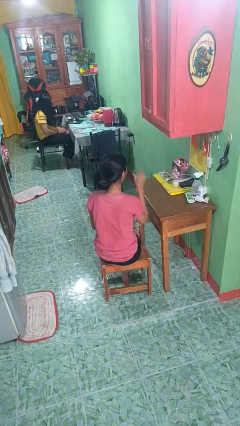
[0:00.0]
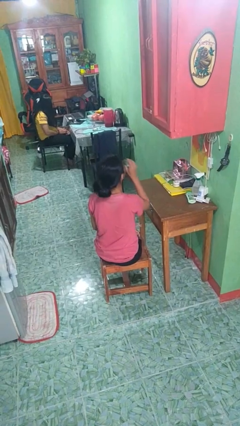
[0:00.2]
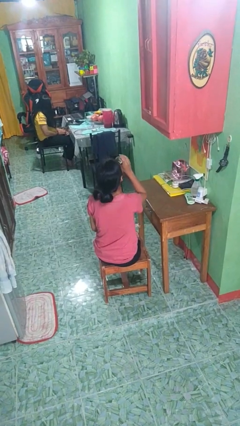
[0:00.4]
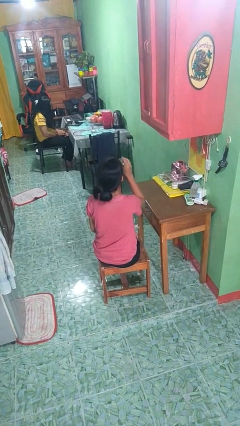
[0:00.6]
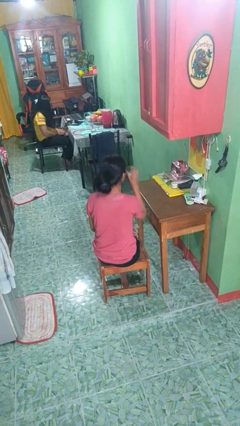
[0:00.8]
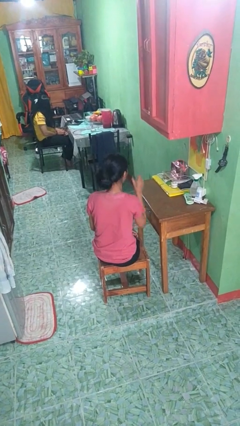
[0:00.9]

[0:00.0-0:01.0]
person drinks from shotglass

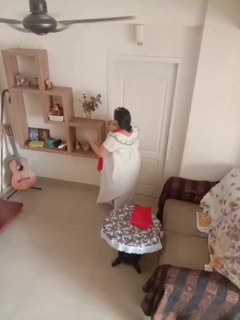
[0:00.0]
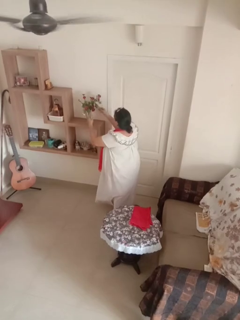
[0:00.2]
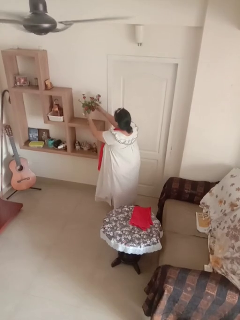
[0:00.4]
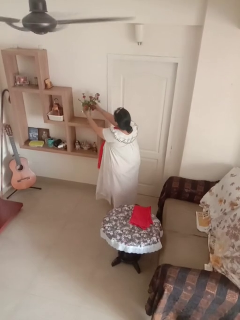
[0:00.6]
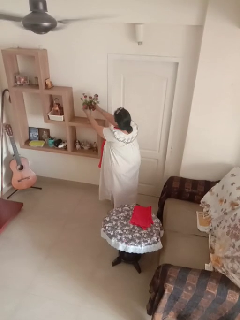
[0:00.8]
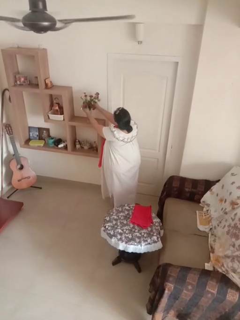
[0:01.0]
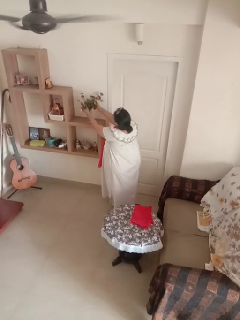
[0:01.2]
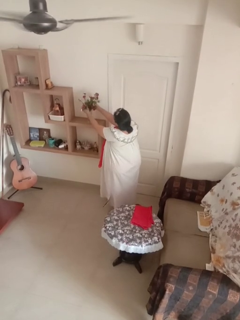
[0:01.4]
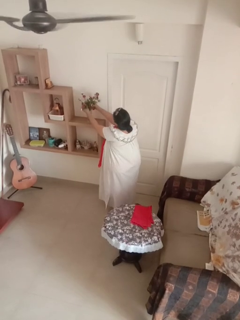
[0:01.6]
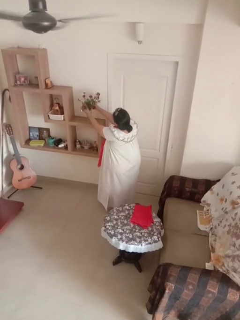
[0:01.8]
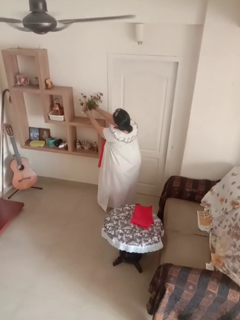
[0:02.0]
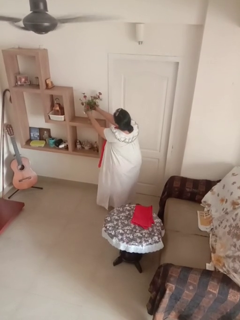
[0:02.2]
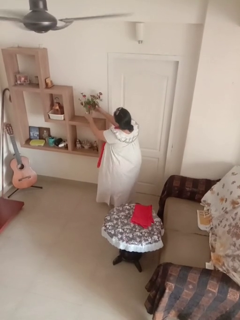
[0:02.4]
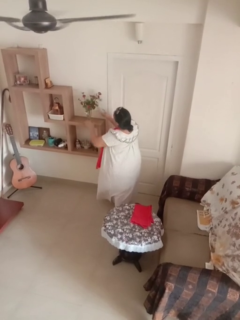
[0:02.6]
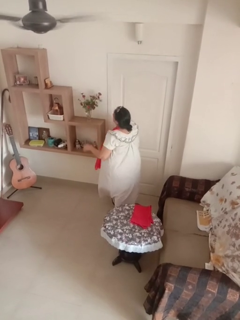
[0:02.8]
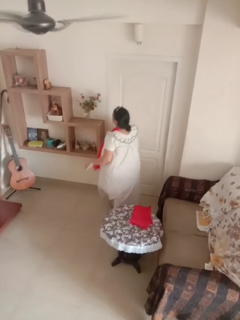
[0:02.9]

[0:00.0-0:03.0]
person arranges flowers in vase

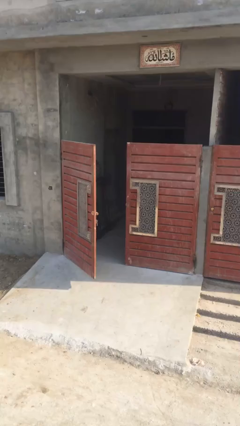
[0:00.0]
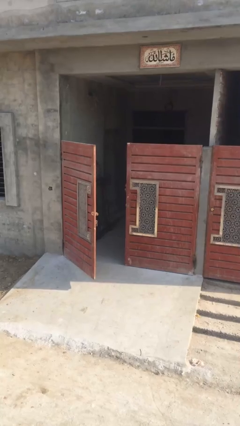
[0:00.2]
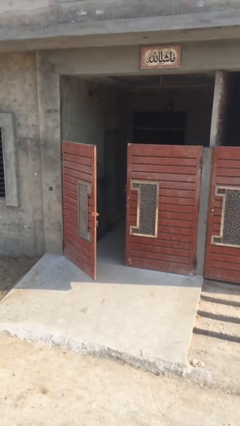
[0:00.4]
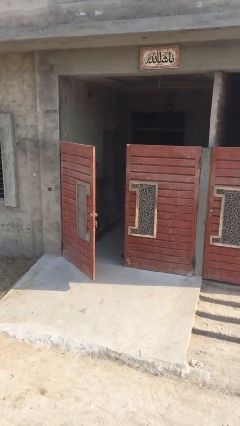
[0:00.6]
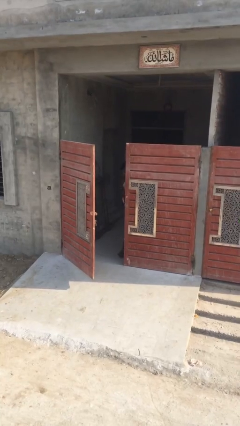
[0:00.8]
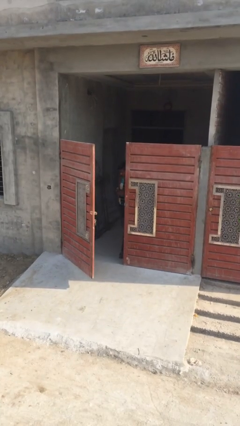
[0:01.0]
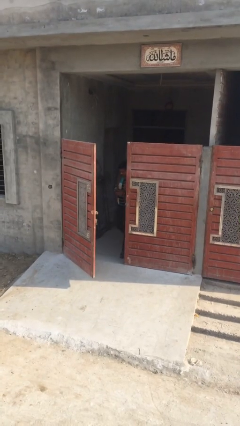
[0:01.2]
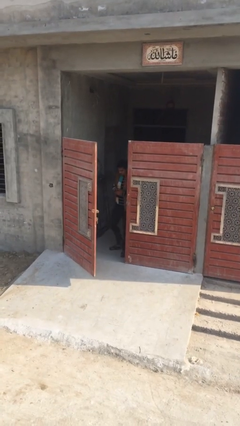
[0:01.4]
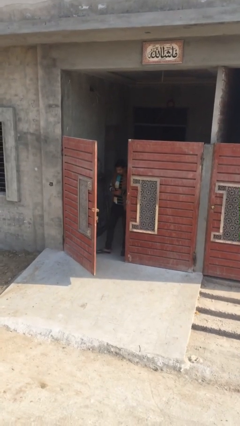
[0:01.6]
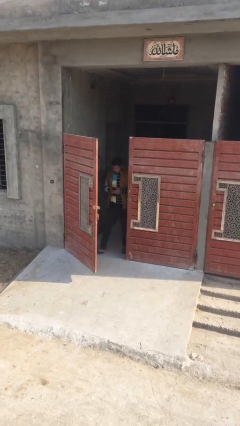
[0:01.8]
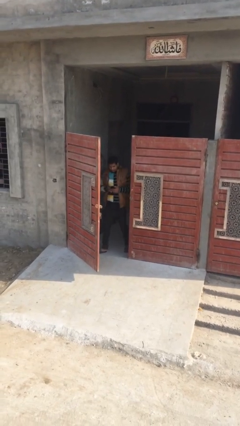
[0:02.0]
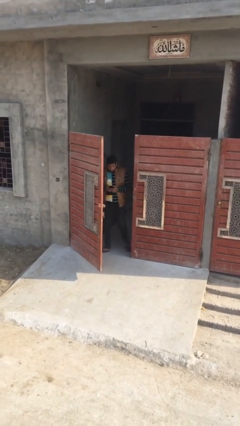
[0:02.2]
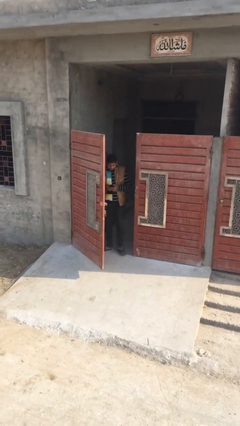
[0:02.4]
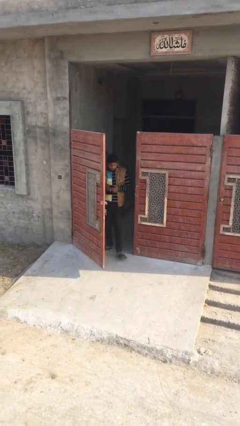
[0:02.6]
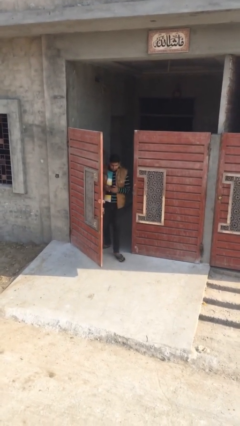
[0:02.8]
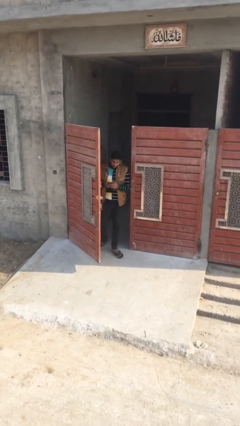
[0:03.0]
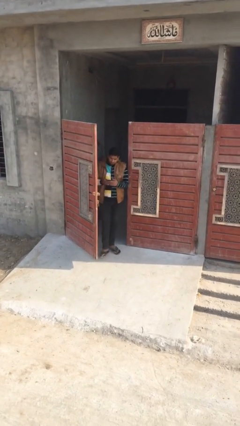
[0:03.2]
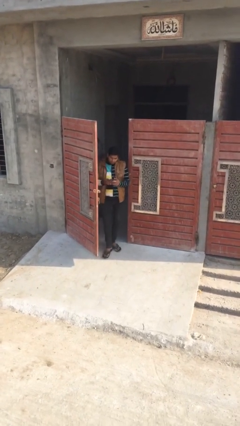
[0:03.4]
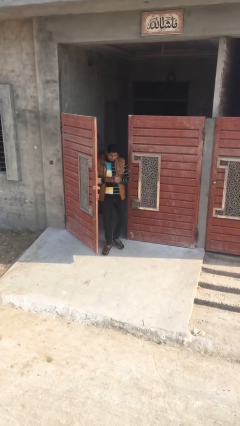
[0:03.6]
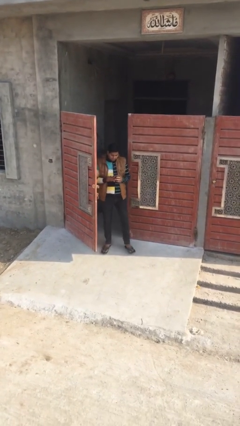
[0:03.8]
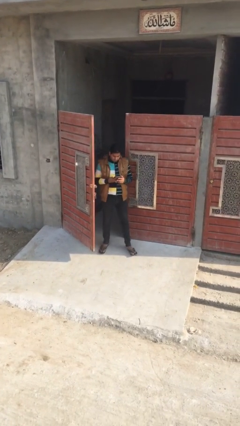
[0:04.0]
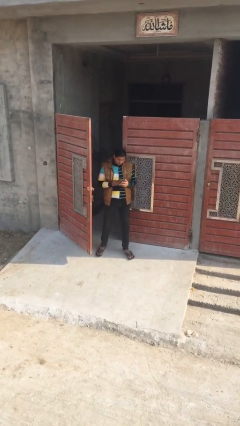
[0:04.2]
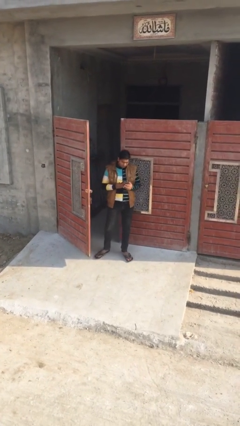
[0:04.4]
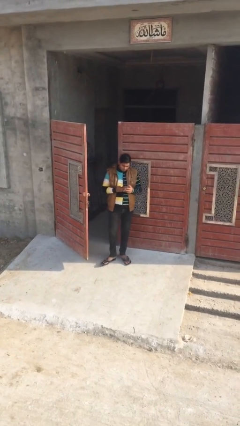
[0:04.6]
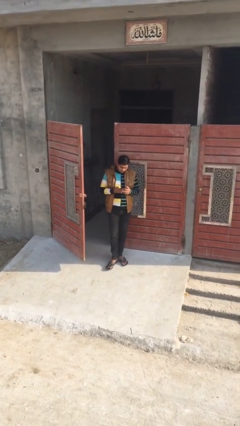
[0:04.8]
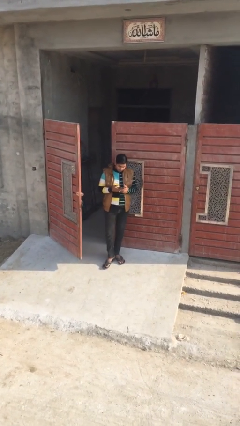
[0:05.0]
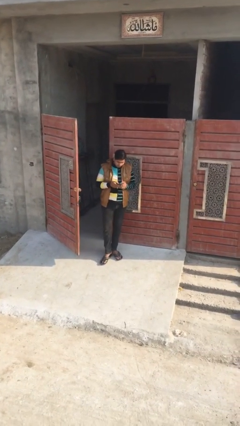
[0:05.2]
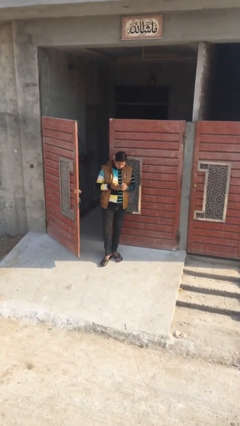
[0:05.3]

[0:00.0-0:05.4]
person enters scene through structure

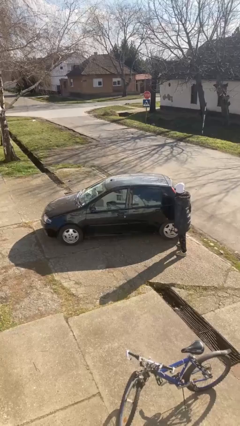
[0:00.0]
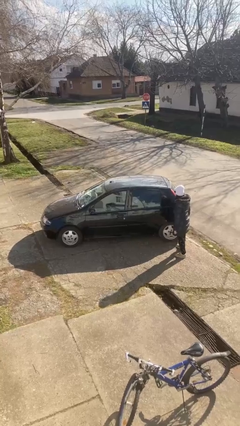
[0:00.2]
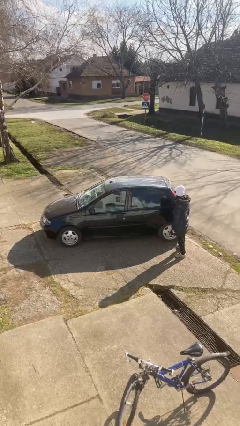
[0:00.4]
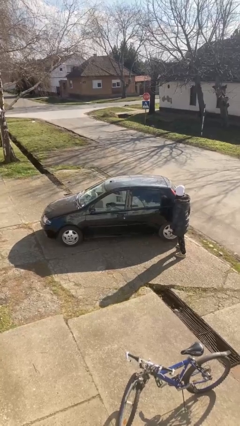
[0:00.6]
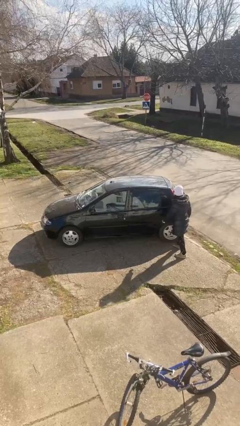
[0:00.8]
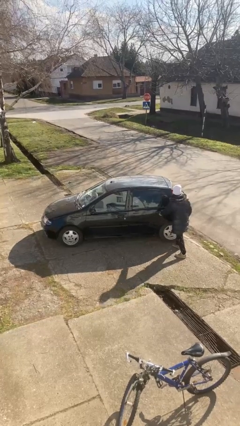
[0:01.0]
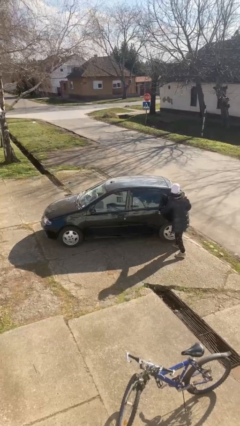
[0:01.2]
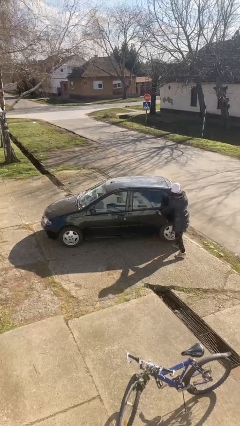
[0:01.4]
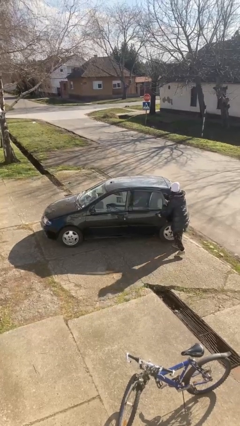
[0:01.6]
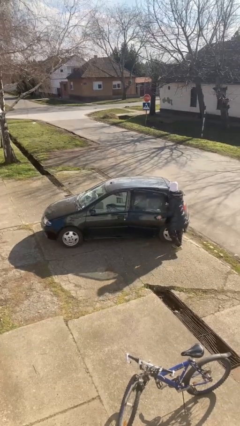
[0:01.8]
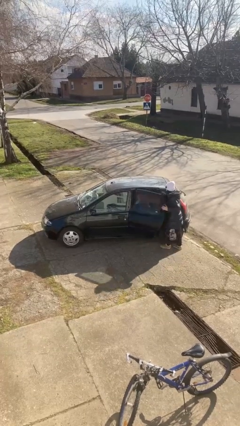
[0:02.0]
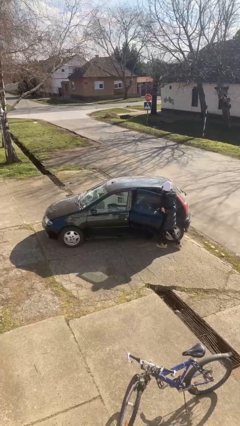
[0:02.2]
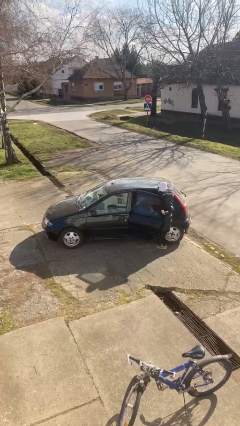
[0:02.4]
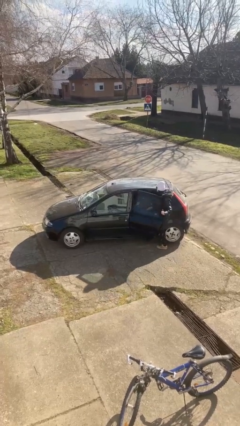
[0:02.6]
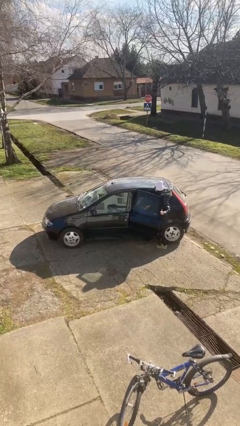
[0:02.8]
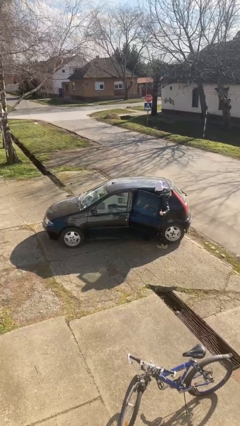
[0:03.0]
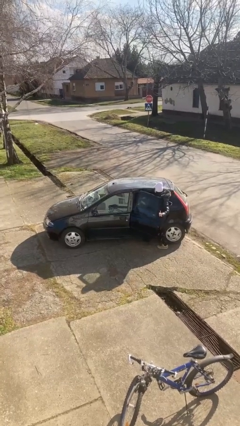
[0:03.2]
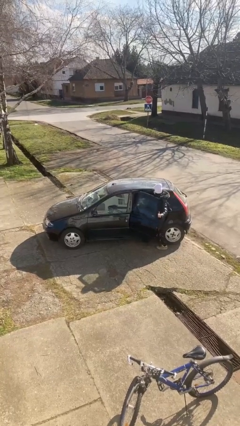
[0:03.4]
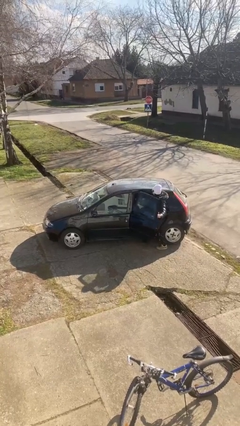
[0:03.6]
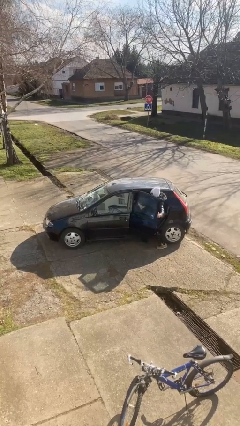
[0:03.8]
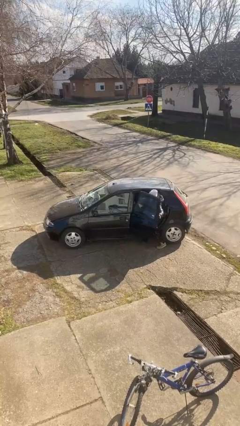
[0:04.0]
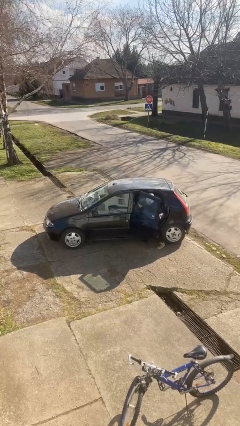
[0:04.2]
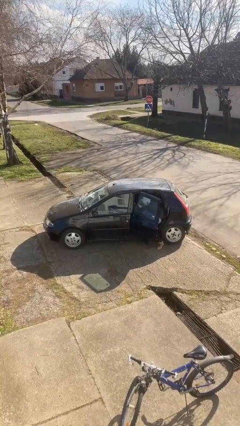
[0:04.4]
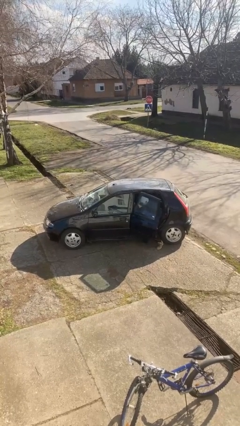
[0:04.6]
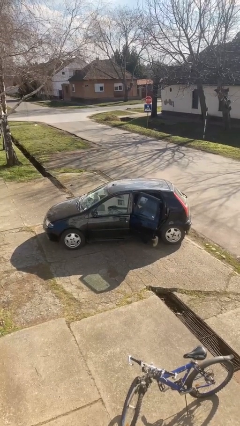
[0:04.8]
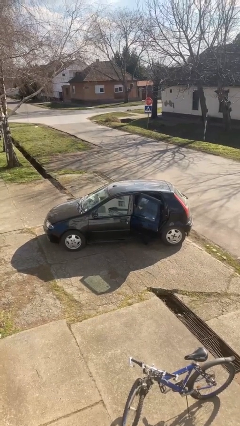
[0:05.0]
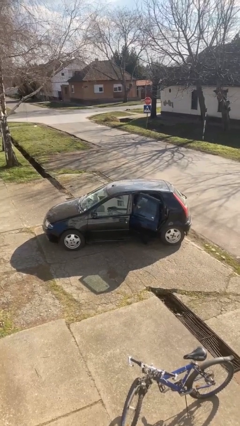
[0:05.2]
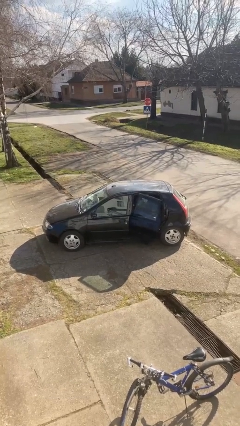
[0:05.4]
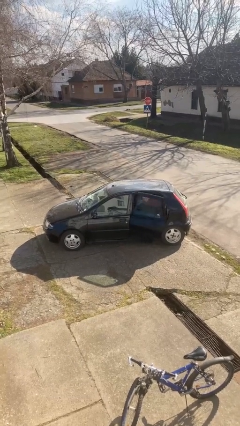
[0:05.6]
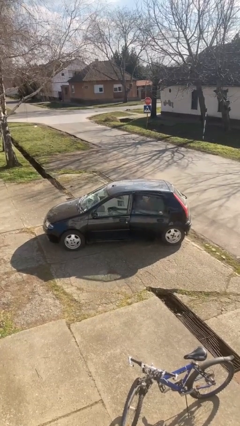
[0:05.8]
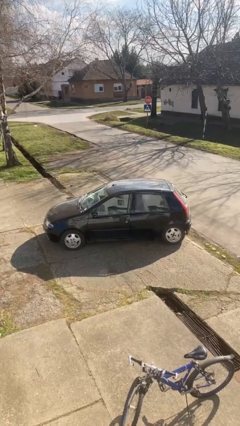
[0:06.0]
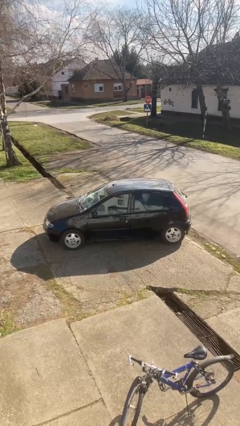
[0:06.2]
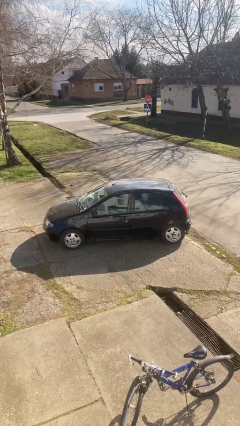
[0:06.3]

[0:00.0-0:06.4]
car picks up person

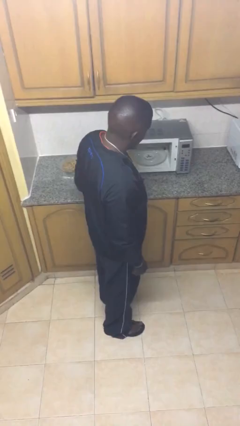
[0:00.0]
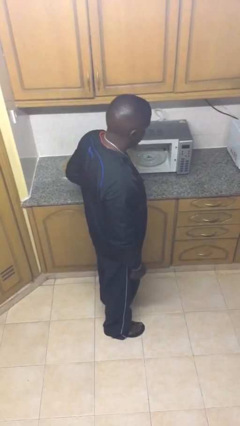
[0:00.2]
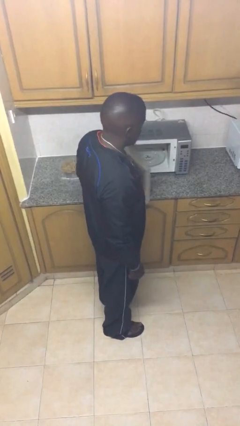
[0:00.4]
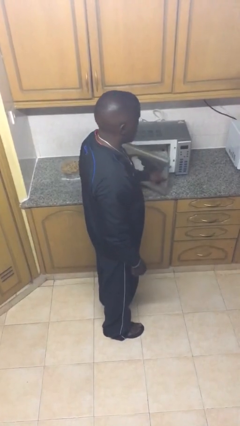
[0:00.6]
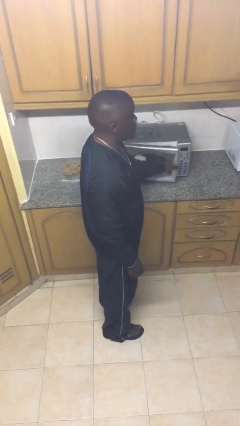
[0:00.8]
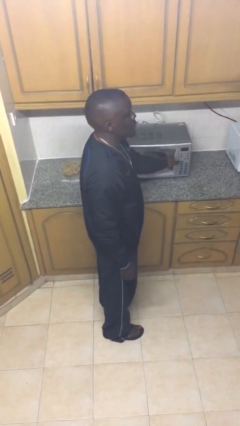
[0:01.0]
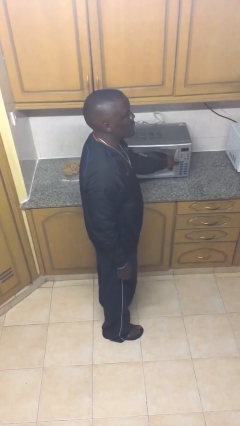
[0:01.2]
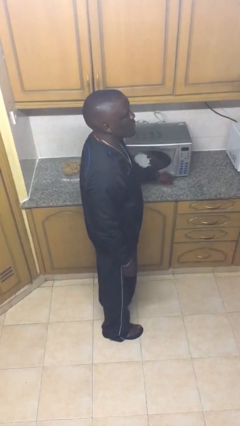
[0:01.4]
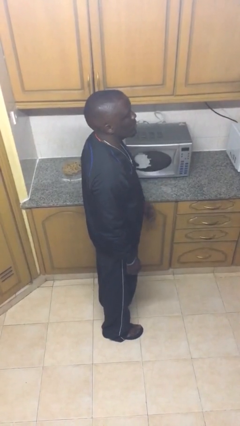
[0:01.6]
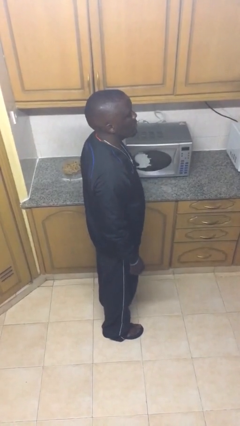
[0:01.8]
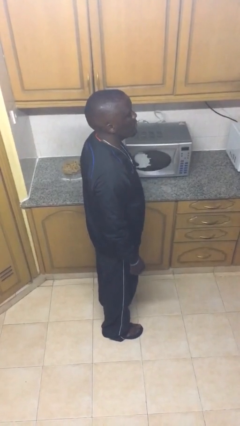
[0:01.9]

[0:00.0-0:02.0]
person closes microwave

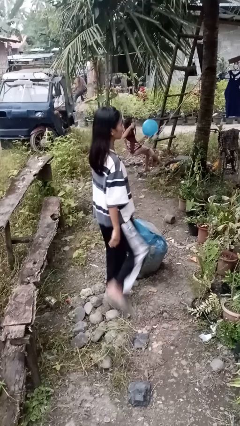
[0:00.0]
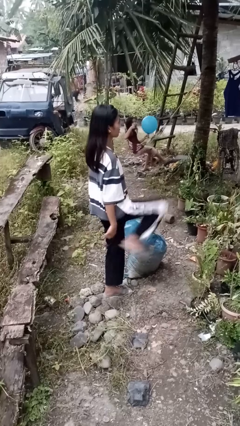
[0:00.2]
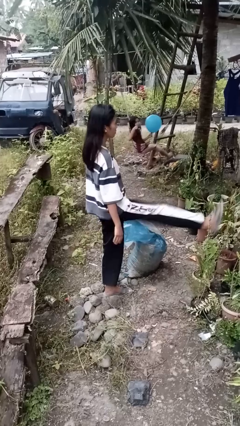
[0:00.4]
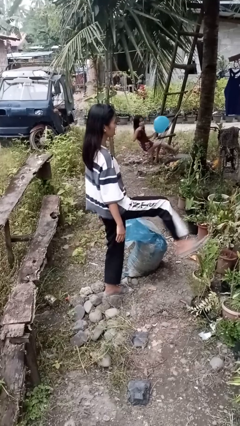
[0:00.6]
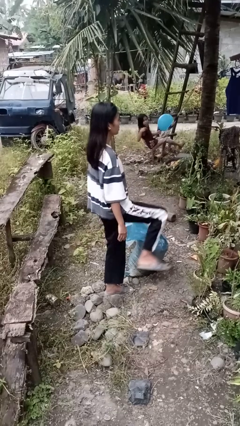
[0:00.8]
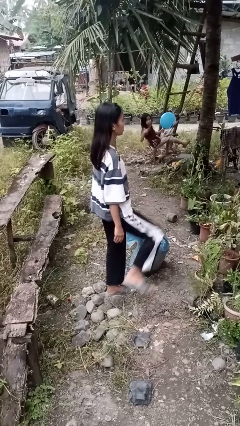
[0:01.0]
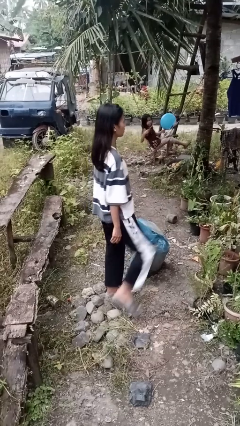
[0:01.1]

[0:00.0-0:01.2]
person karate kicks
